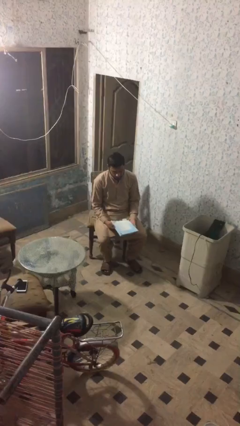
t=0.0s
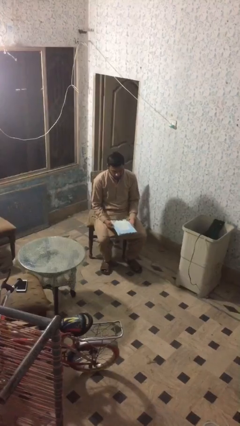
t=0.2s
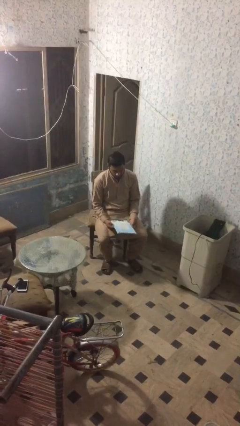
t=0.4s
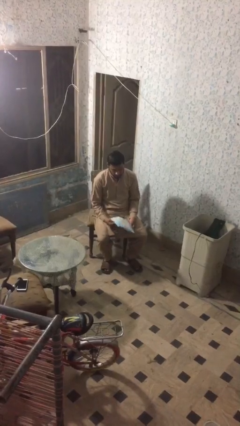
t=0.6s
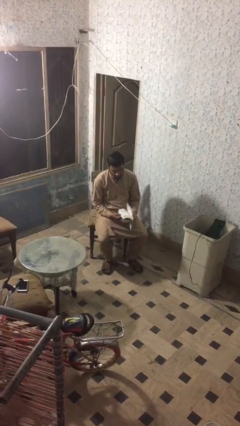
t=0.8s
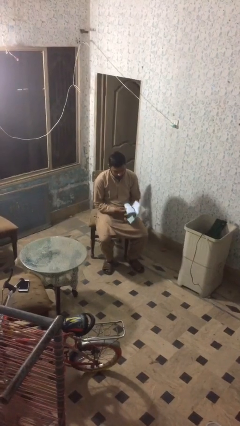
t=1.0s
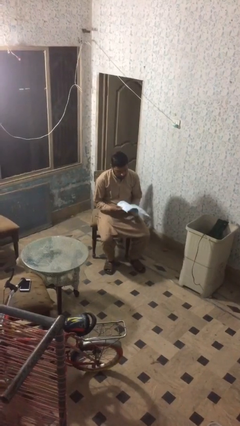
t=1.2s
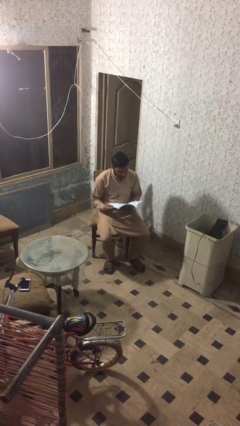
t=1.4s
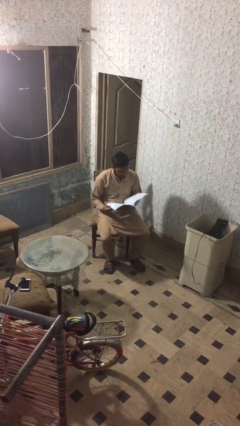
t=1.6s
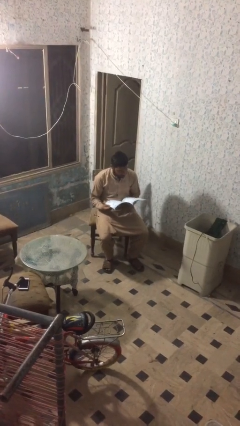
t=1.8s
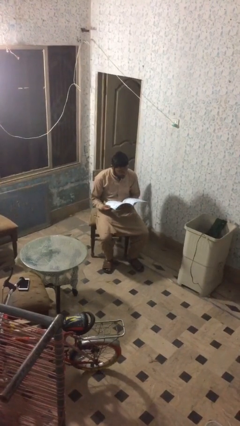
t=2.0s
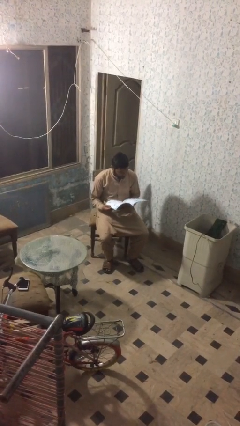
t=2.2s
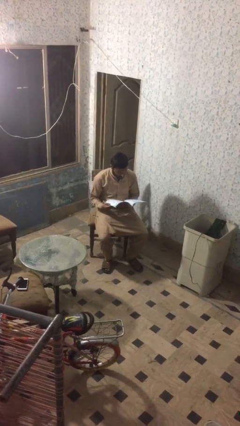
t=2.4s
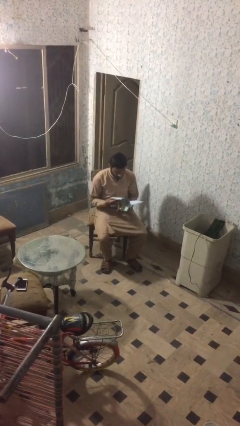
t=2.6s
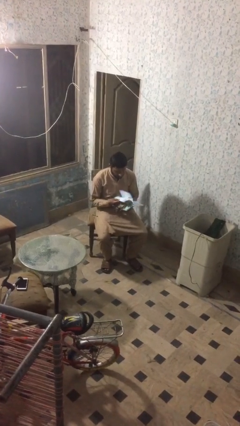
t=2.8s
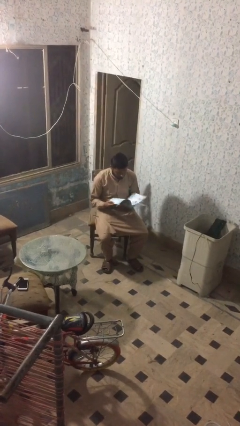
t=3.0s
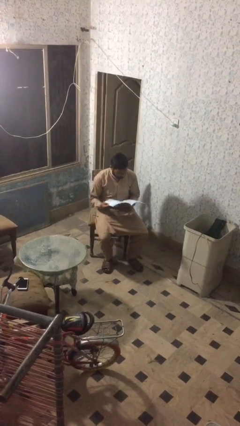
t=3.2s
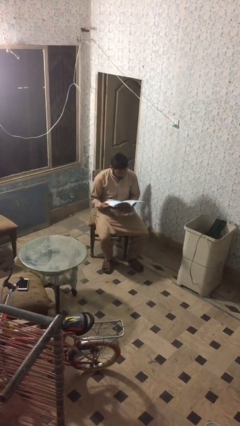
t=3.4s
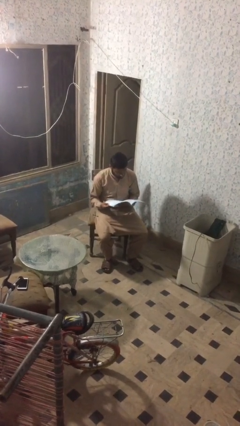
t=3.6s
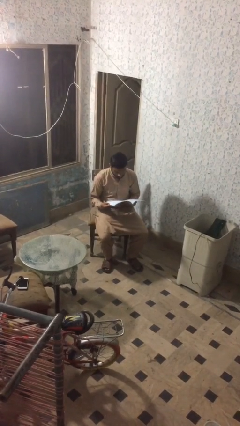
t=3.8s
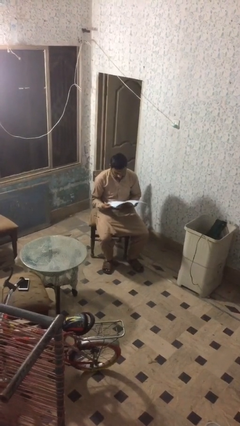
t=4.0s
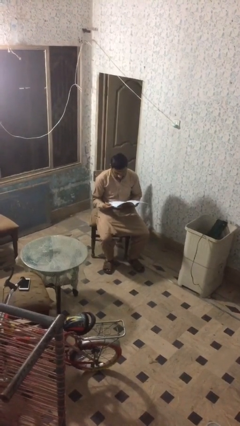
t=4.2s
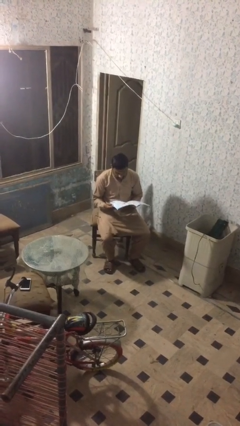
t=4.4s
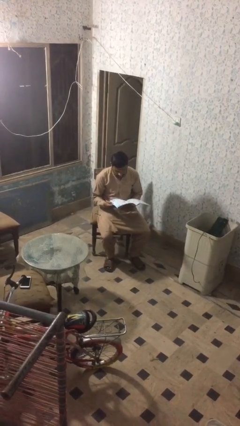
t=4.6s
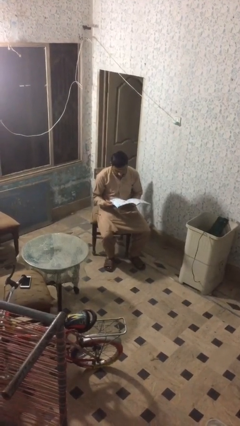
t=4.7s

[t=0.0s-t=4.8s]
person reads document

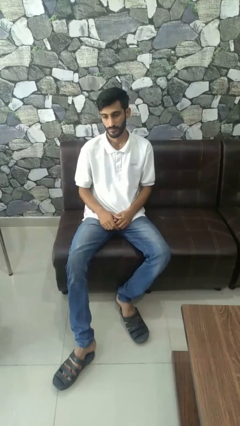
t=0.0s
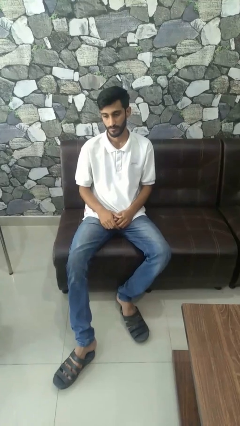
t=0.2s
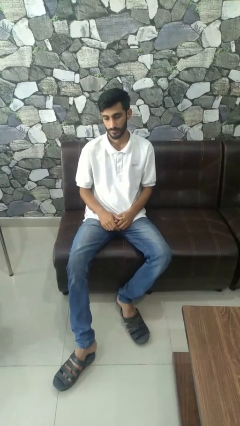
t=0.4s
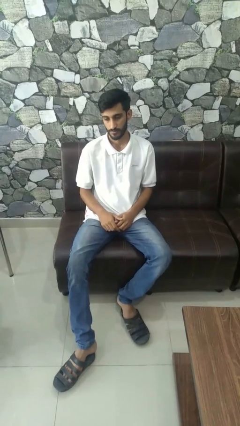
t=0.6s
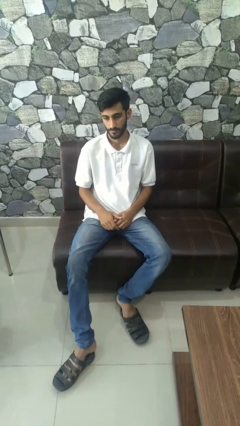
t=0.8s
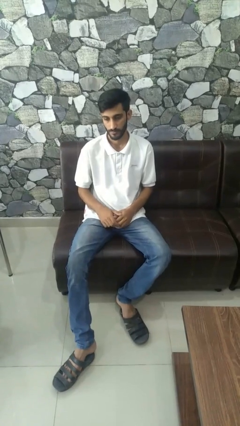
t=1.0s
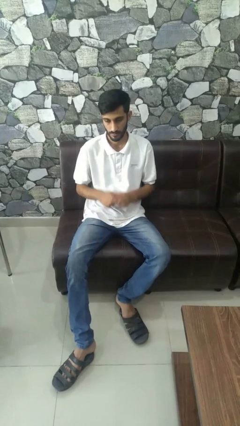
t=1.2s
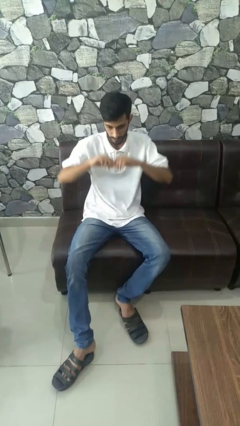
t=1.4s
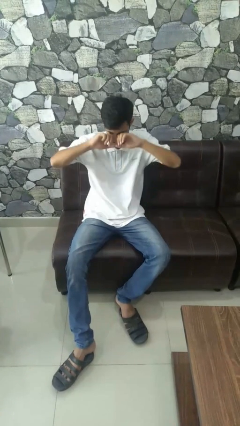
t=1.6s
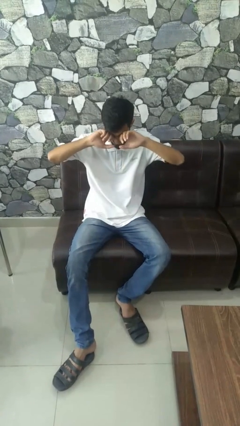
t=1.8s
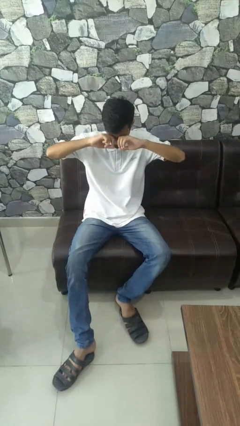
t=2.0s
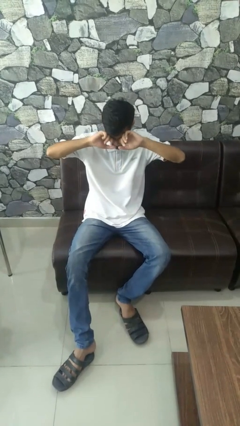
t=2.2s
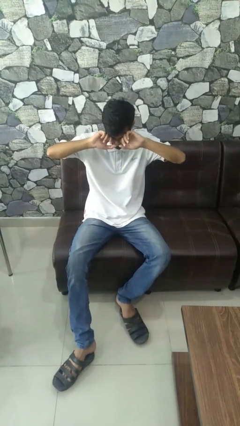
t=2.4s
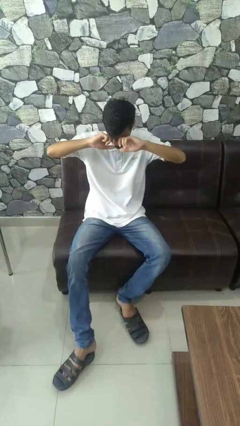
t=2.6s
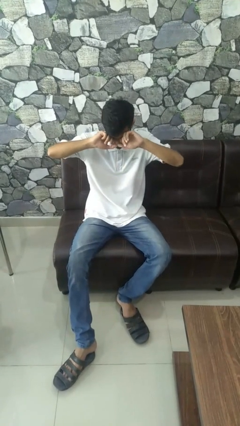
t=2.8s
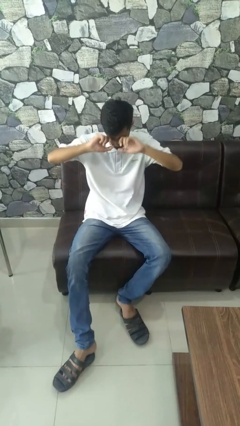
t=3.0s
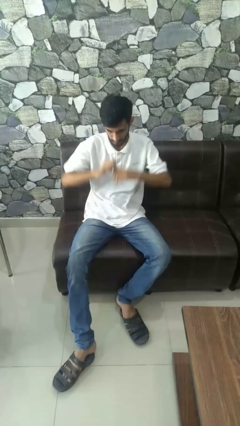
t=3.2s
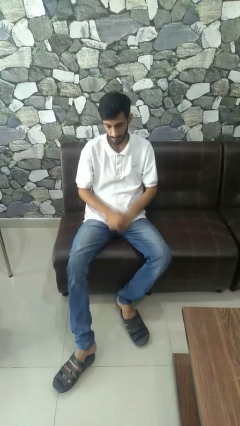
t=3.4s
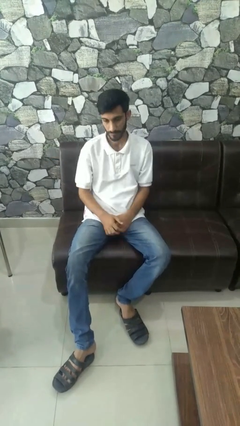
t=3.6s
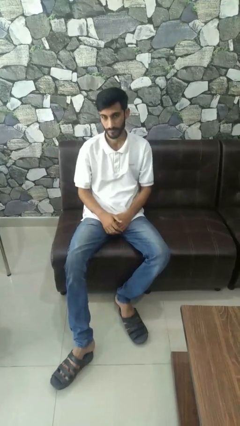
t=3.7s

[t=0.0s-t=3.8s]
person rubs eyes

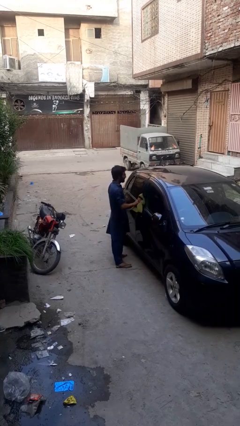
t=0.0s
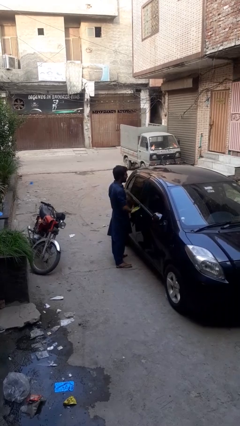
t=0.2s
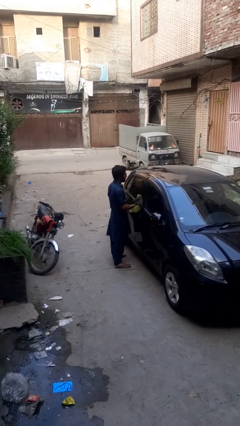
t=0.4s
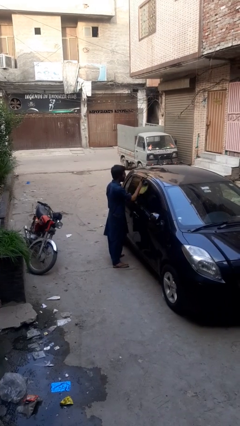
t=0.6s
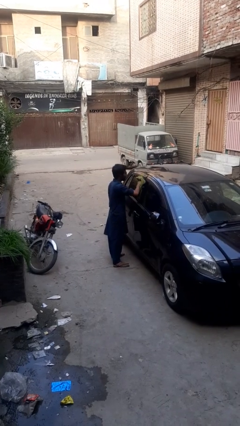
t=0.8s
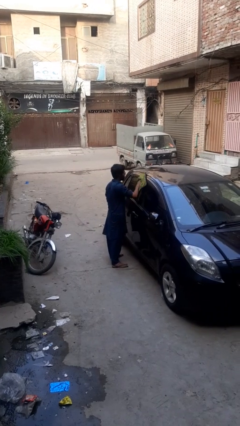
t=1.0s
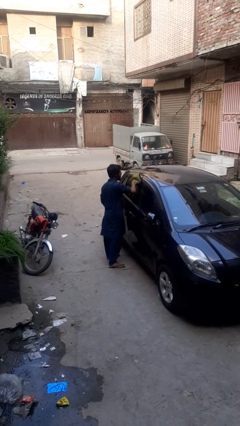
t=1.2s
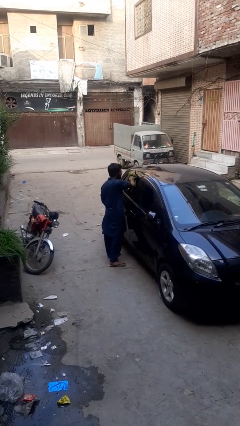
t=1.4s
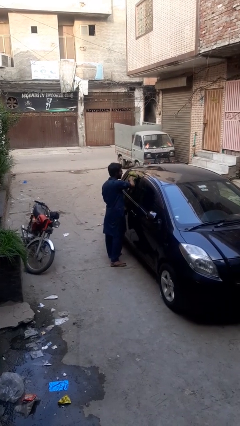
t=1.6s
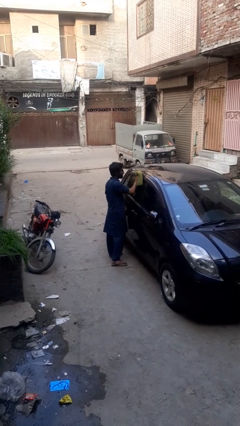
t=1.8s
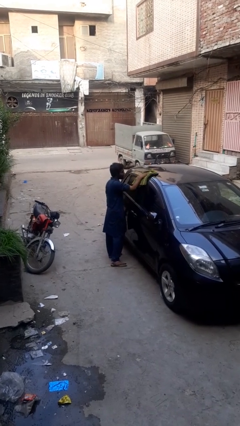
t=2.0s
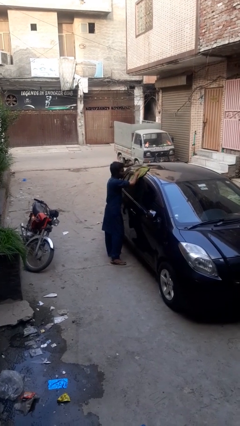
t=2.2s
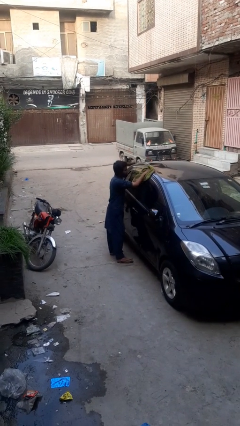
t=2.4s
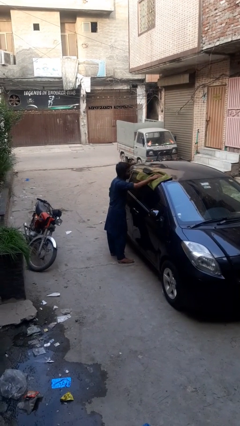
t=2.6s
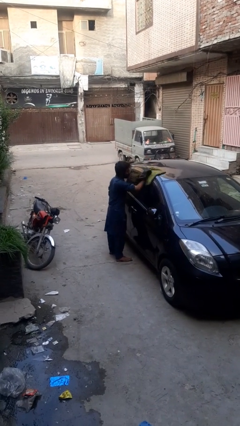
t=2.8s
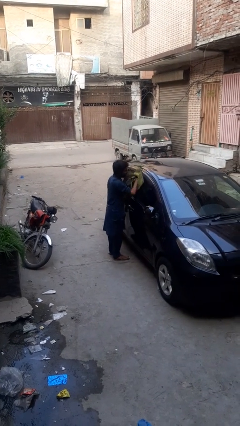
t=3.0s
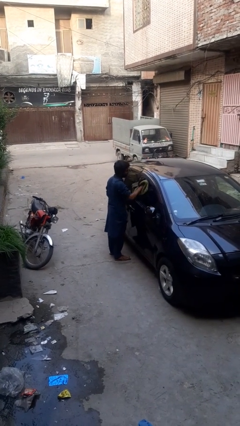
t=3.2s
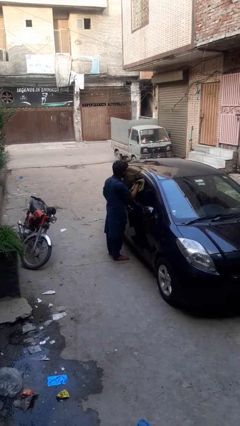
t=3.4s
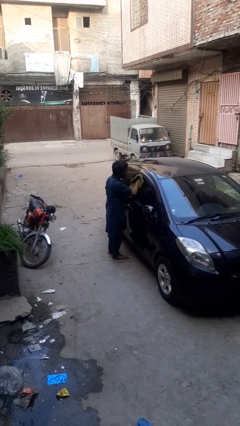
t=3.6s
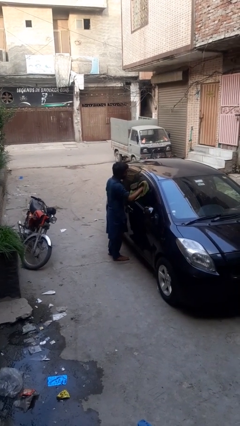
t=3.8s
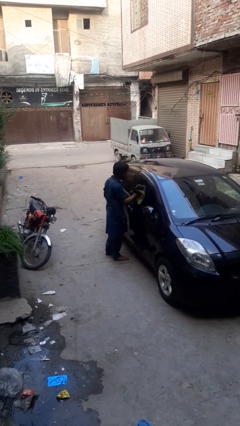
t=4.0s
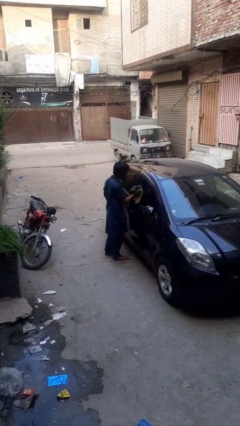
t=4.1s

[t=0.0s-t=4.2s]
person polishes car with rag

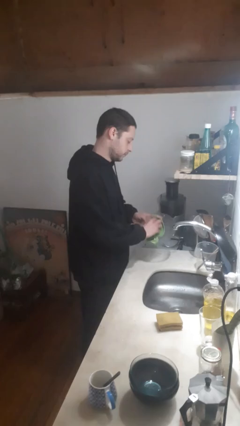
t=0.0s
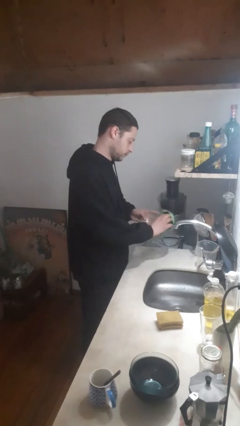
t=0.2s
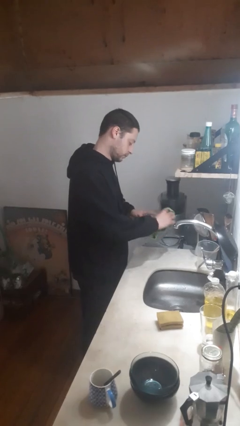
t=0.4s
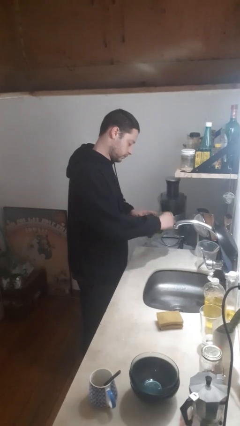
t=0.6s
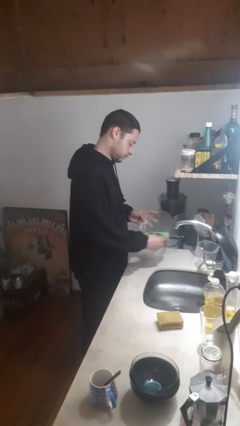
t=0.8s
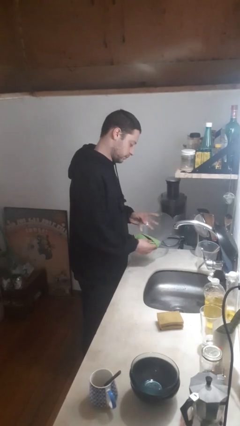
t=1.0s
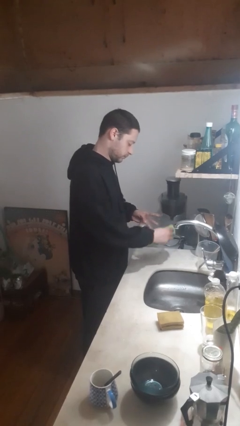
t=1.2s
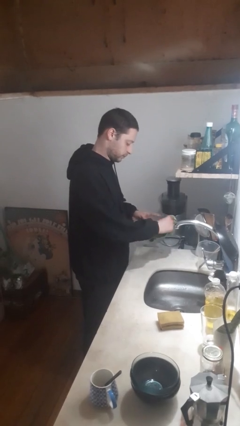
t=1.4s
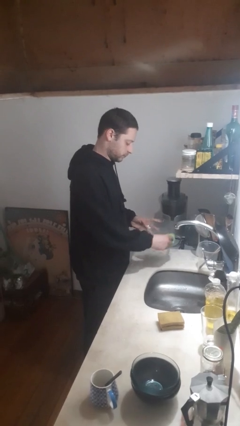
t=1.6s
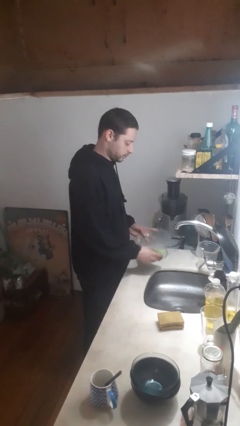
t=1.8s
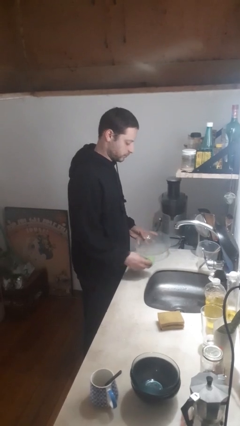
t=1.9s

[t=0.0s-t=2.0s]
person dries dish

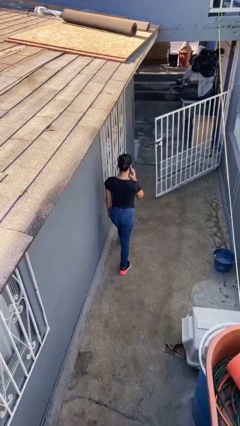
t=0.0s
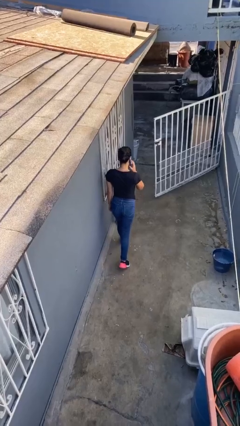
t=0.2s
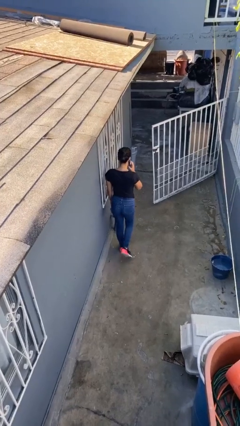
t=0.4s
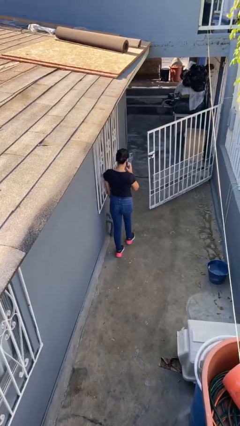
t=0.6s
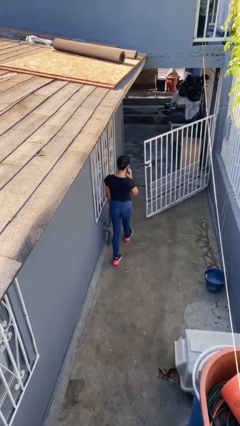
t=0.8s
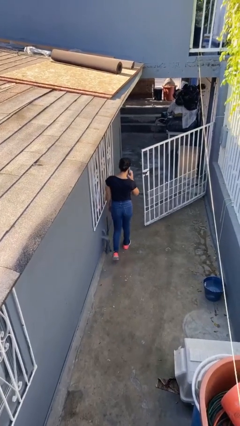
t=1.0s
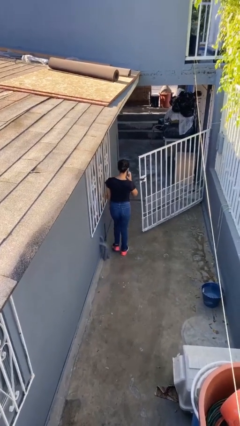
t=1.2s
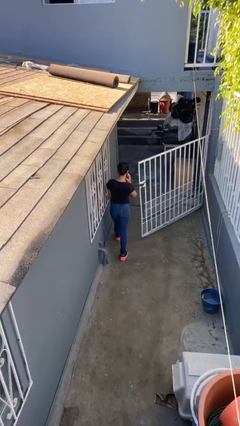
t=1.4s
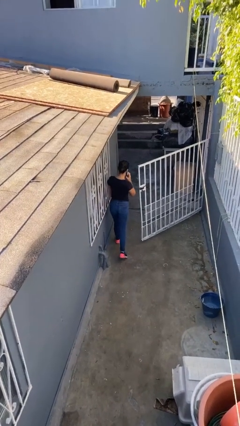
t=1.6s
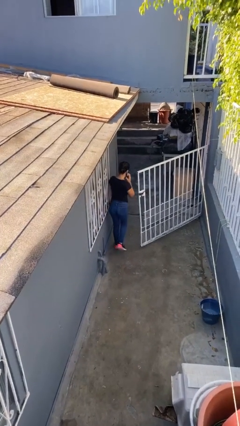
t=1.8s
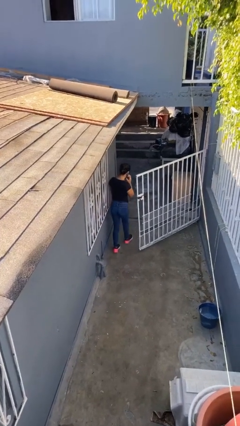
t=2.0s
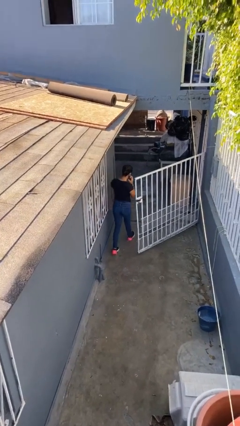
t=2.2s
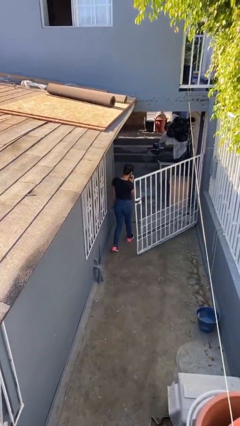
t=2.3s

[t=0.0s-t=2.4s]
person exits scene through structure

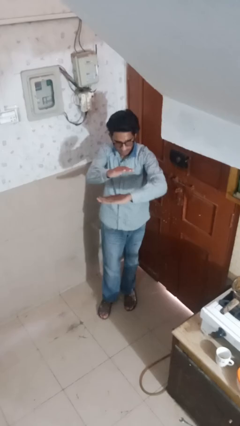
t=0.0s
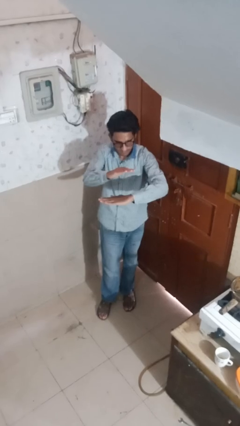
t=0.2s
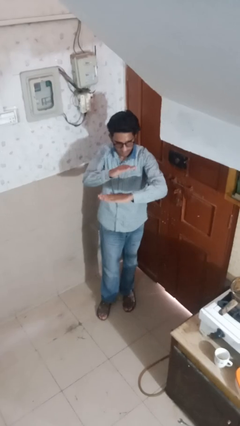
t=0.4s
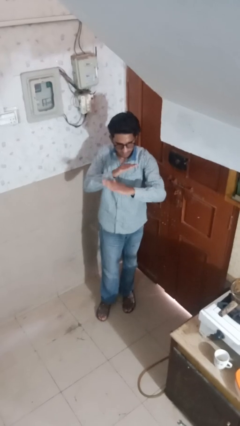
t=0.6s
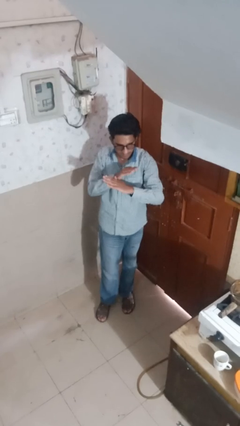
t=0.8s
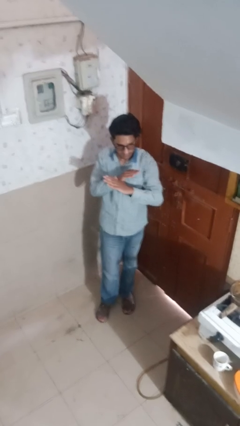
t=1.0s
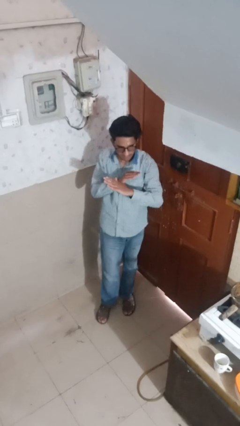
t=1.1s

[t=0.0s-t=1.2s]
person karate chop
